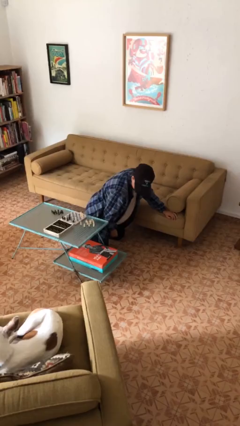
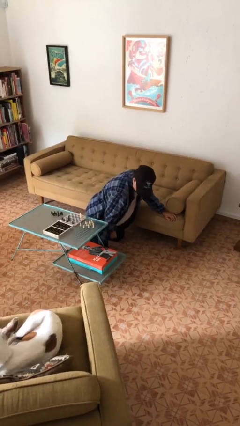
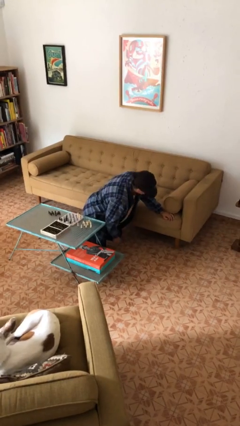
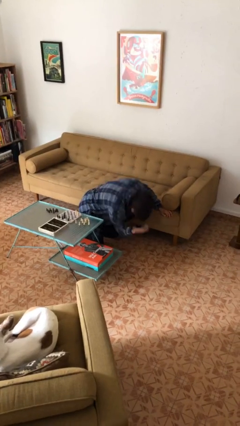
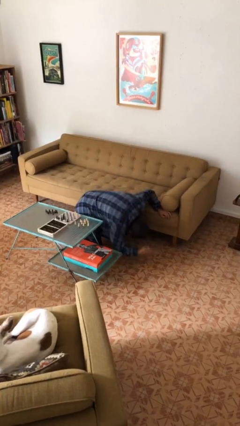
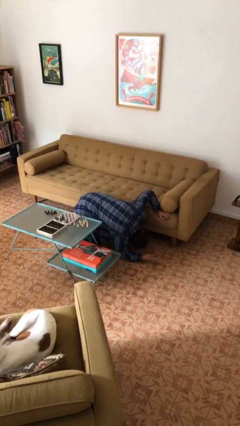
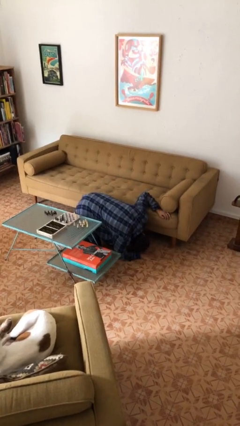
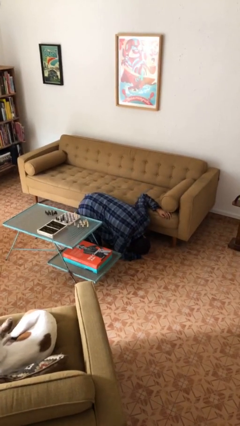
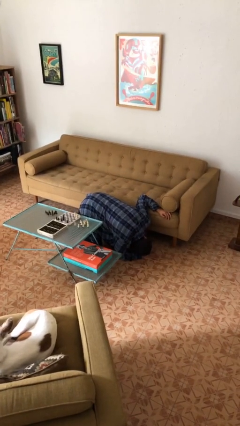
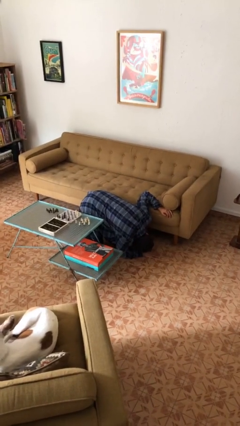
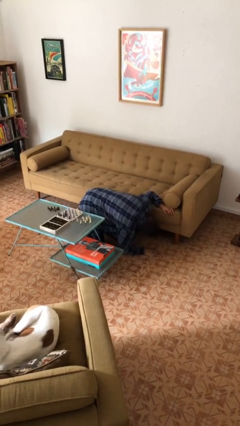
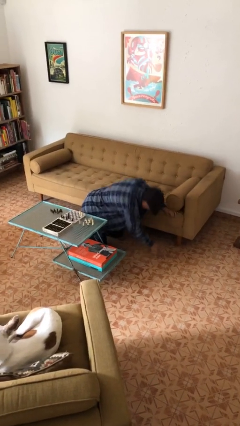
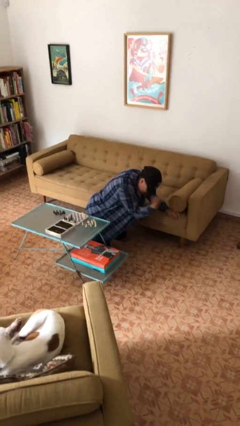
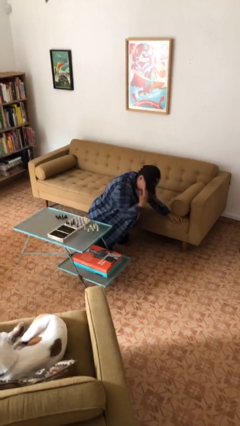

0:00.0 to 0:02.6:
person searches under couch

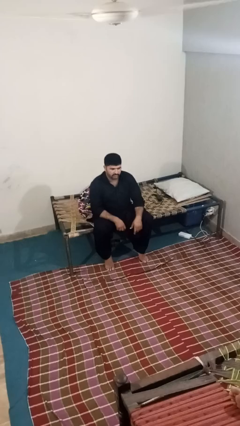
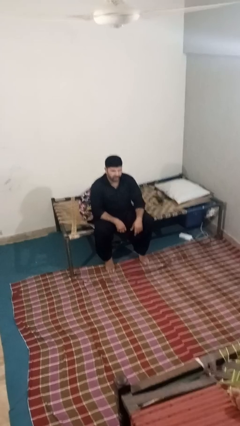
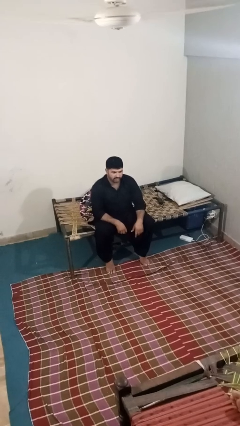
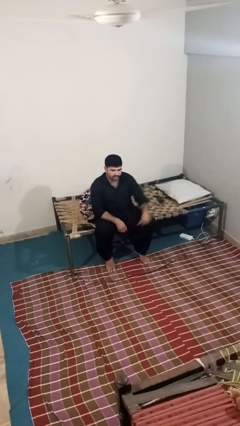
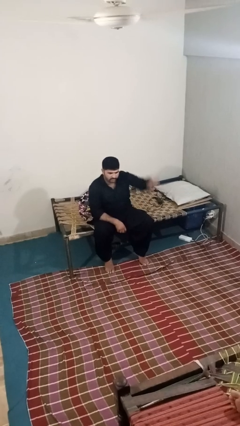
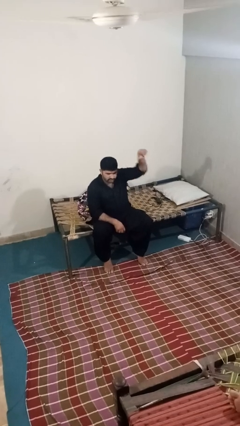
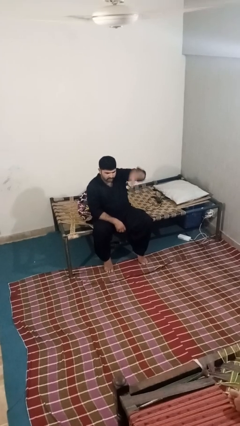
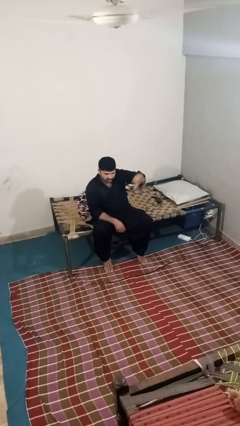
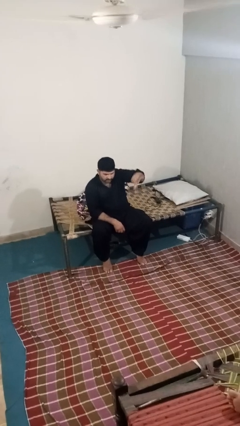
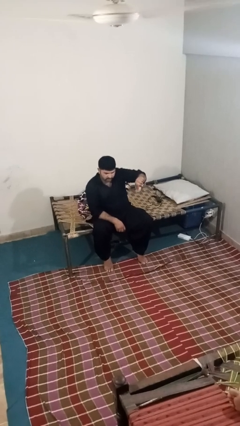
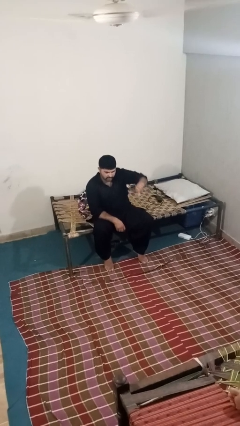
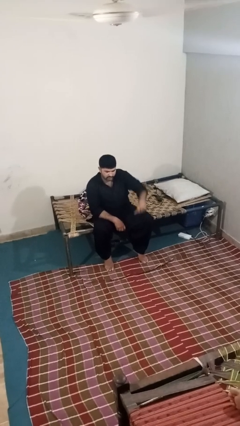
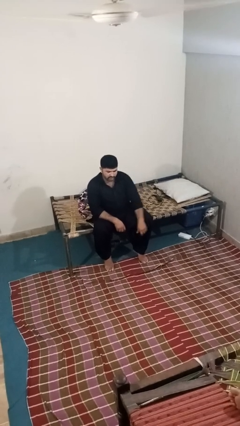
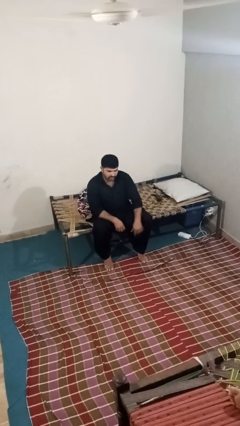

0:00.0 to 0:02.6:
person gestures thumbs down

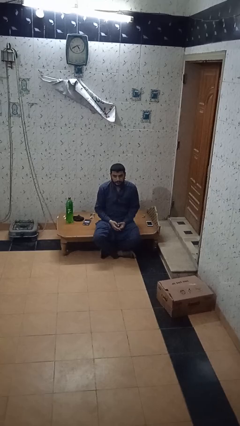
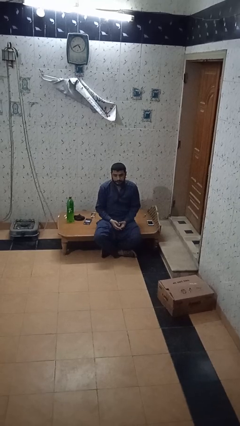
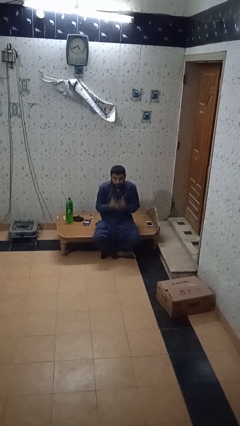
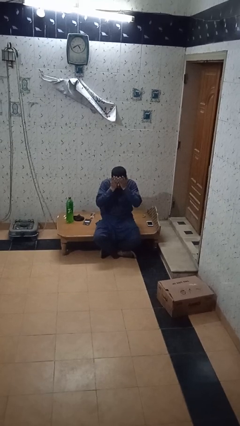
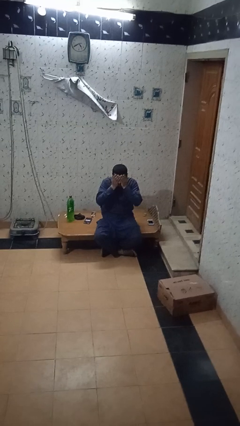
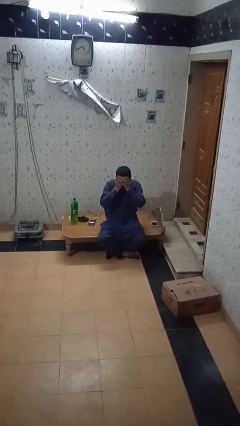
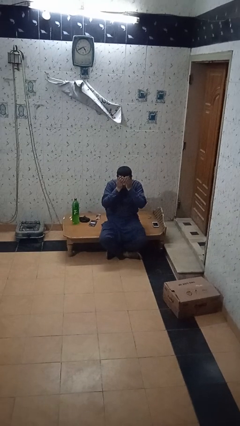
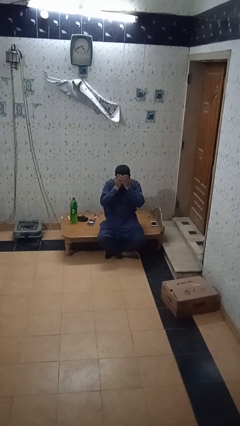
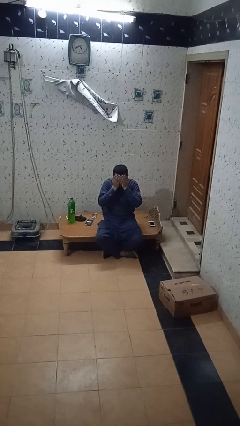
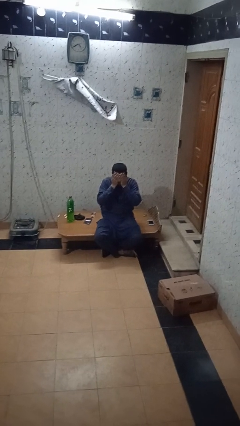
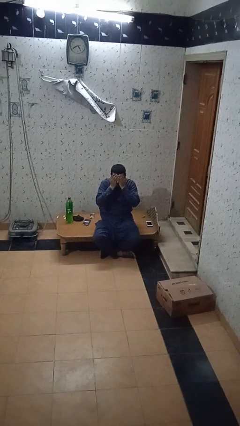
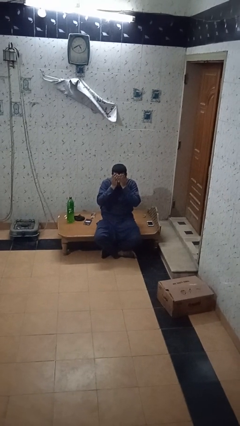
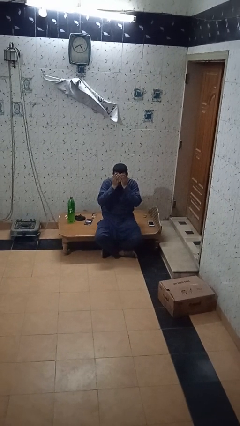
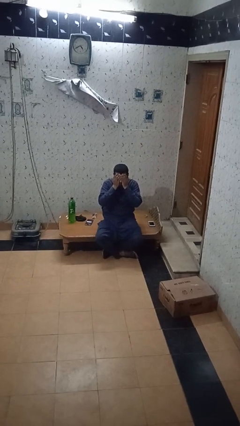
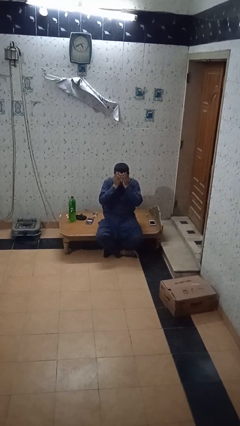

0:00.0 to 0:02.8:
person covers face with hands

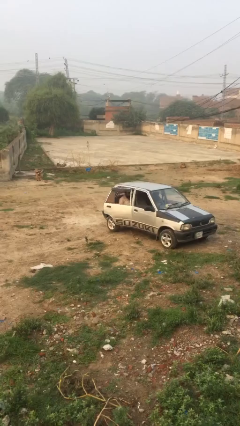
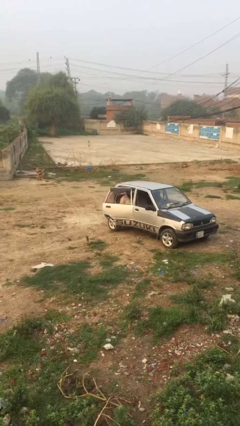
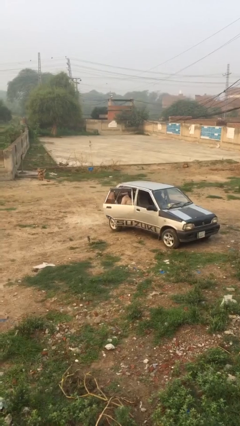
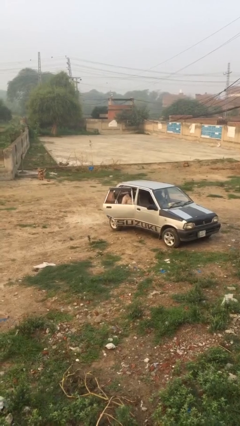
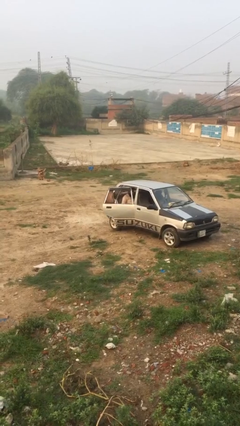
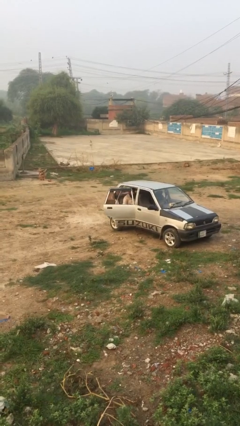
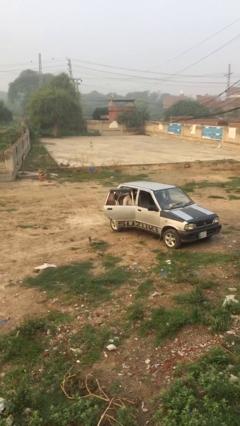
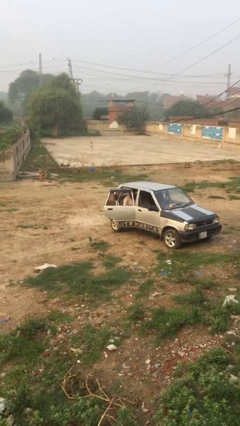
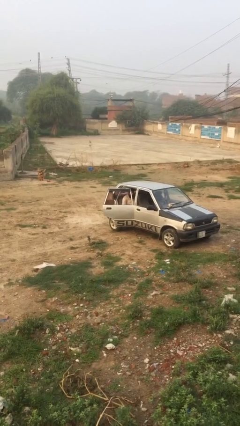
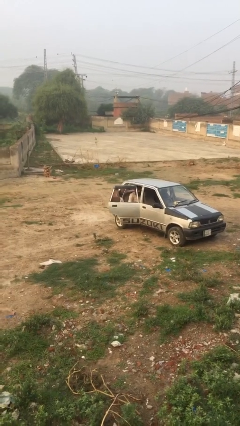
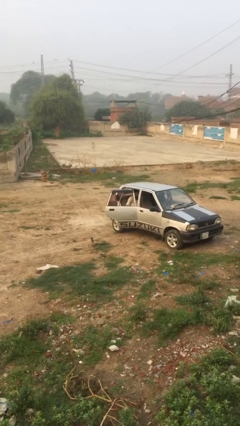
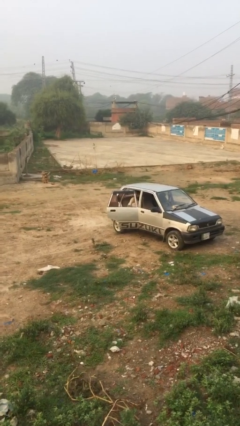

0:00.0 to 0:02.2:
person opens car door

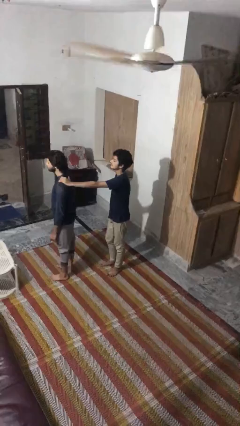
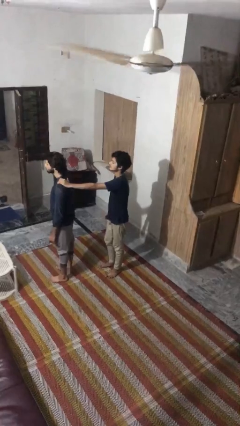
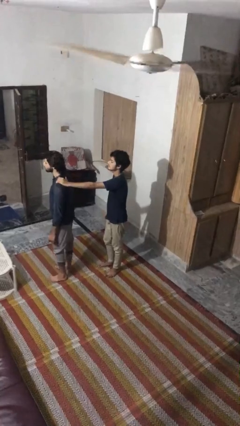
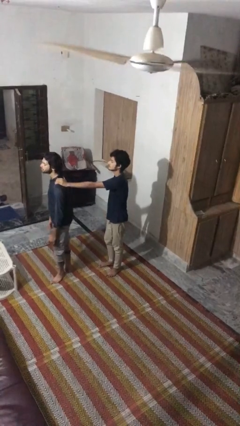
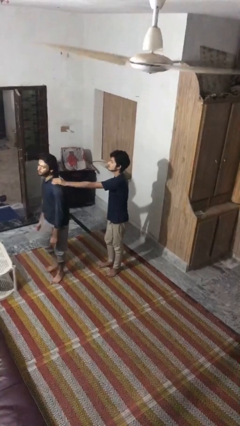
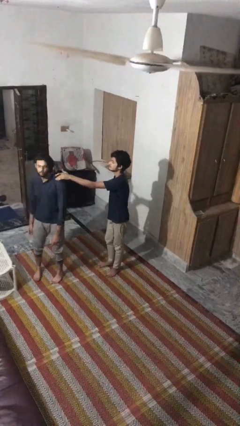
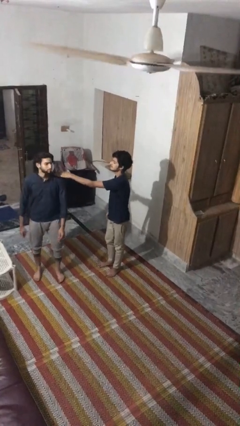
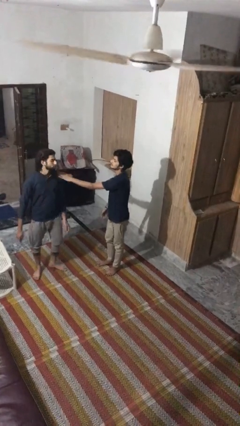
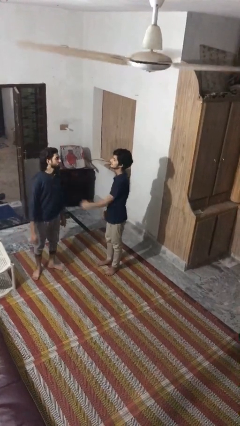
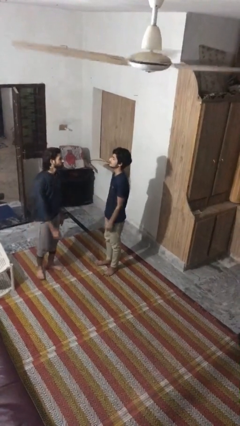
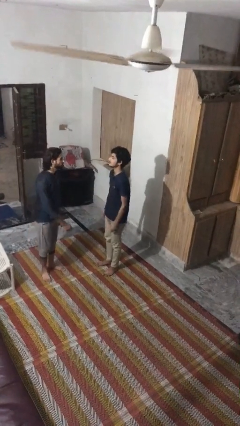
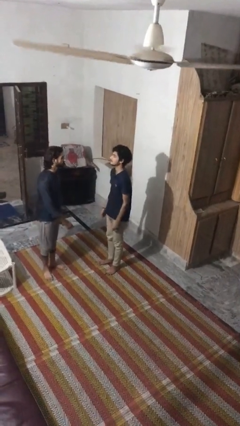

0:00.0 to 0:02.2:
person spins person around

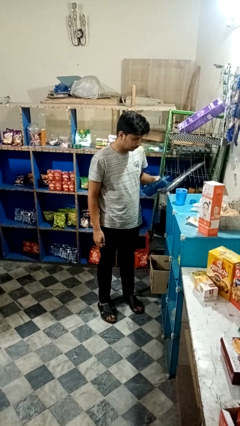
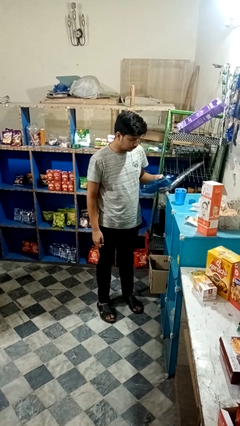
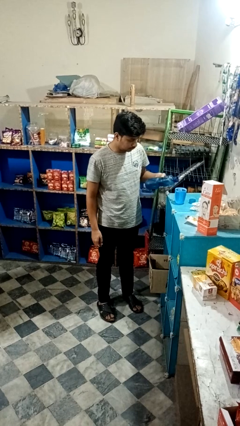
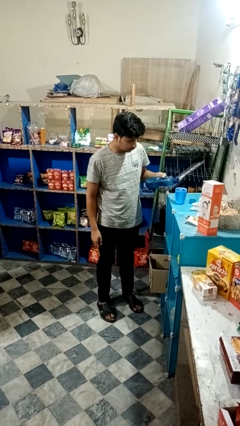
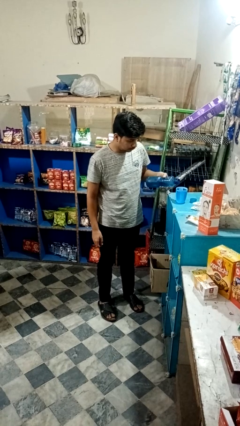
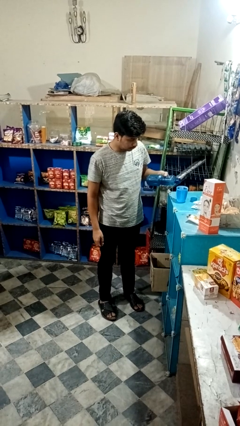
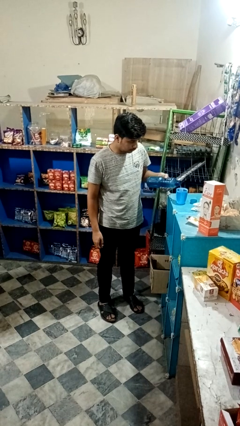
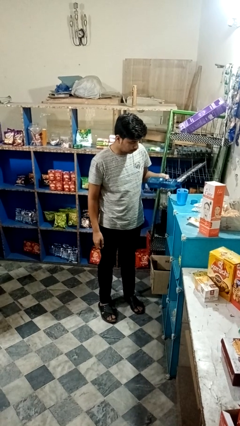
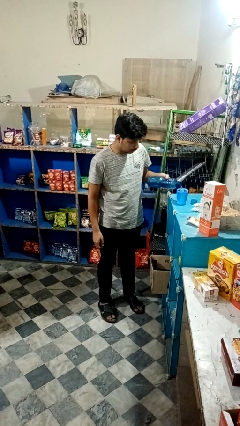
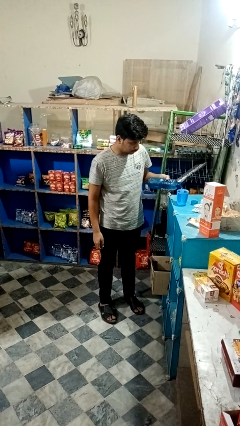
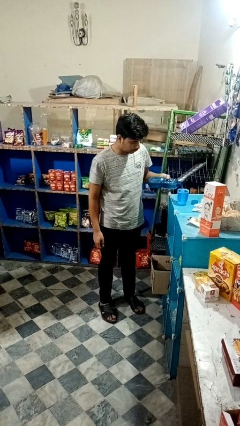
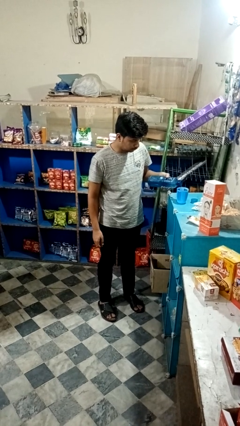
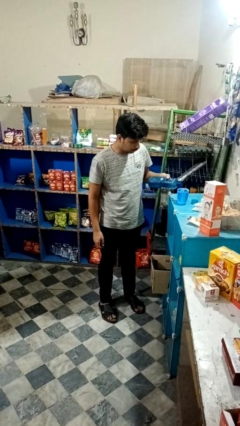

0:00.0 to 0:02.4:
person pours liquid into cup

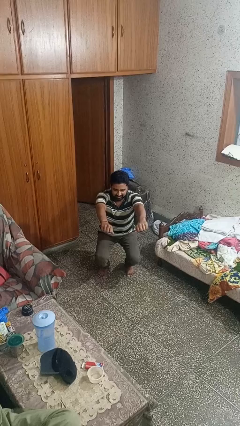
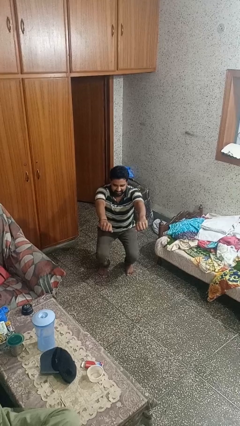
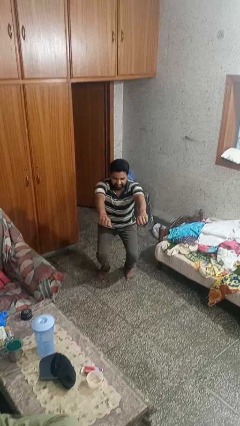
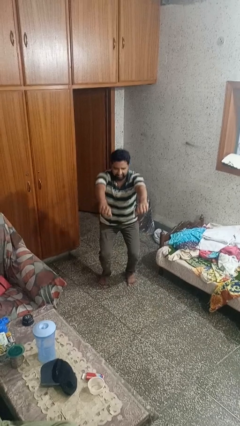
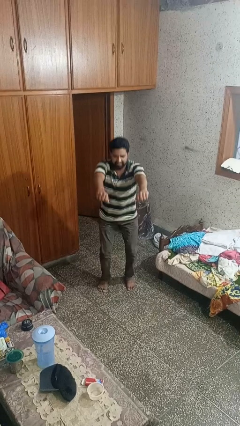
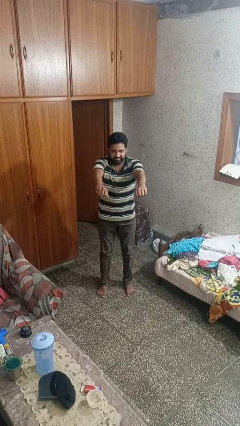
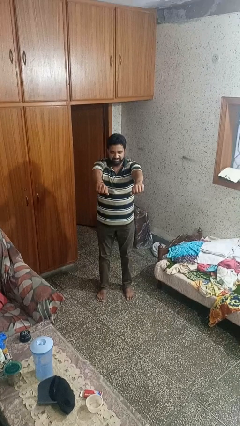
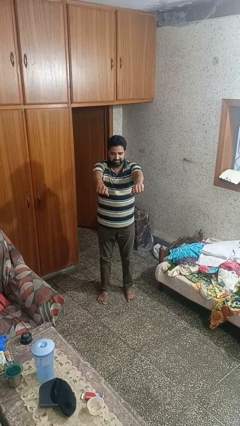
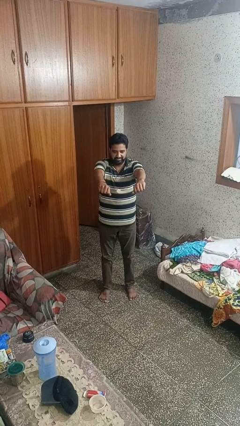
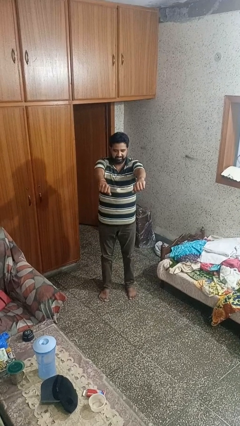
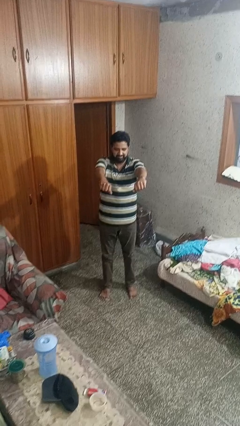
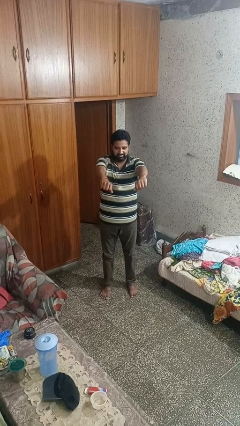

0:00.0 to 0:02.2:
person stands up
